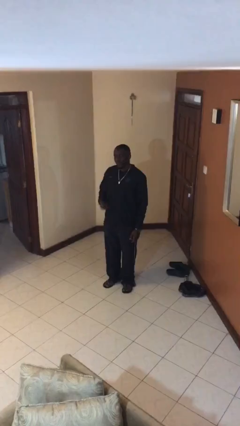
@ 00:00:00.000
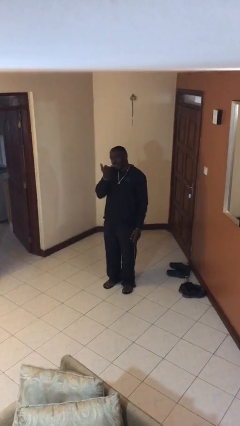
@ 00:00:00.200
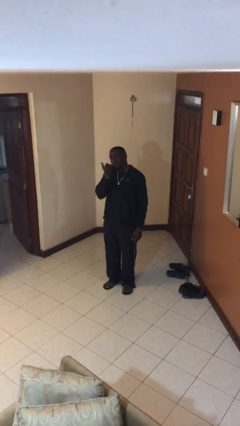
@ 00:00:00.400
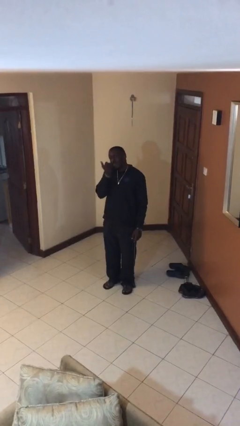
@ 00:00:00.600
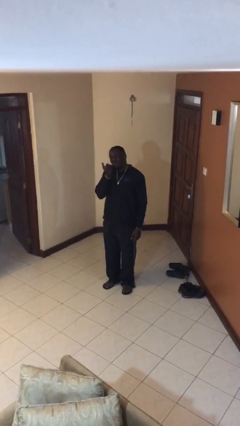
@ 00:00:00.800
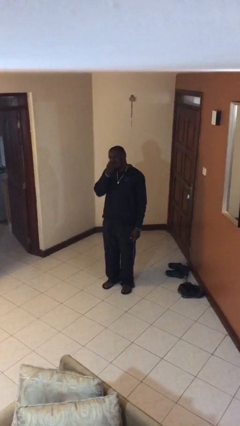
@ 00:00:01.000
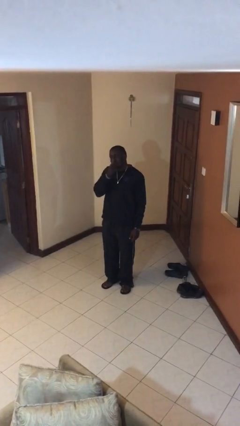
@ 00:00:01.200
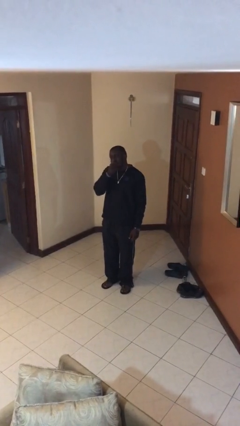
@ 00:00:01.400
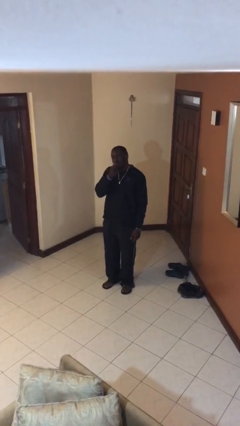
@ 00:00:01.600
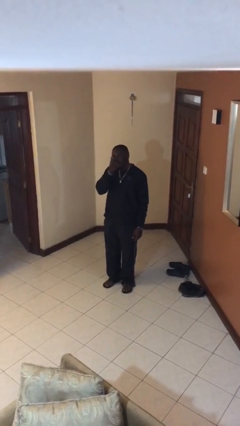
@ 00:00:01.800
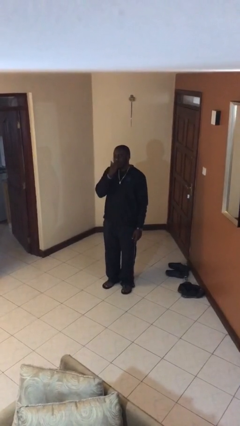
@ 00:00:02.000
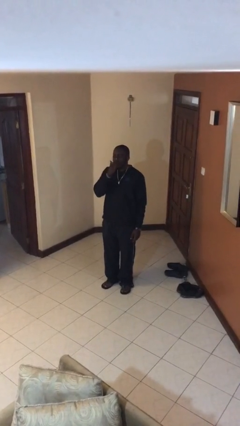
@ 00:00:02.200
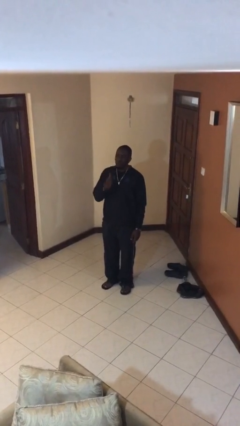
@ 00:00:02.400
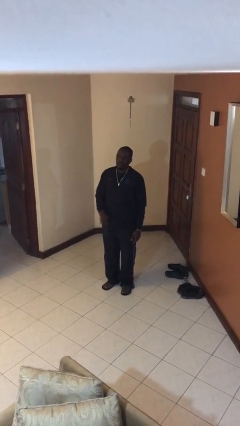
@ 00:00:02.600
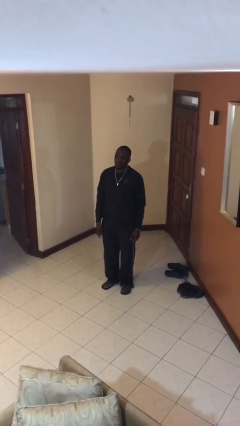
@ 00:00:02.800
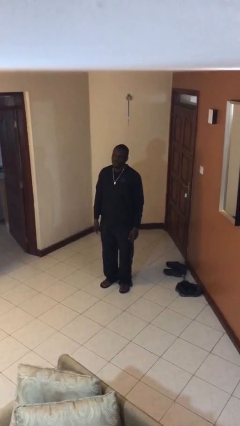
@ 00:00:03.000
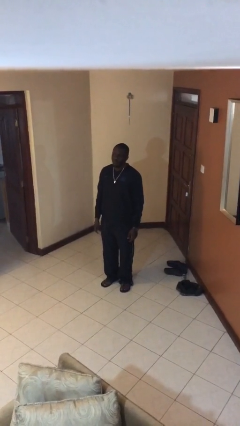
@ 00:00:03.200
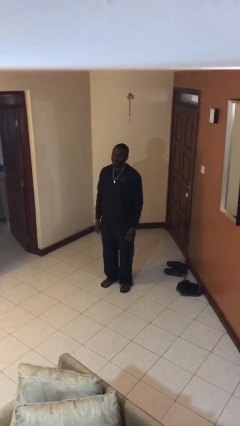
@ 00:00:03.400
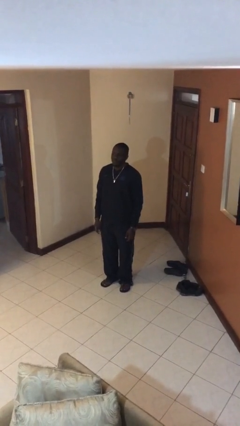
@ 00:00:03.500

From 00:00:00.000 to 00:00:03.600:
person licks fingers

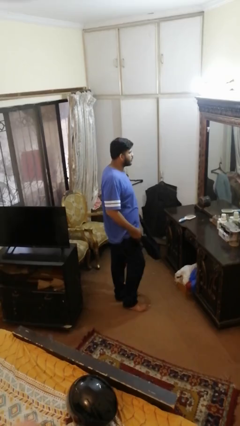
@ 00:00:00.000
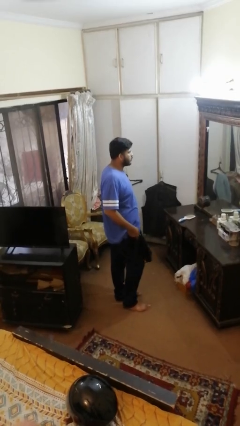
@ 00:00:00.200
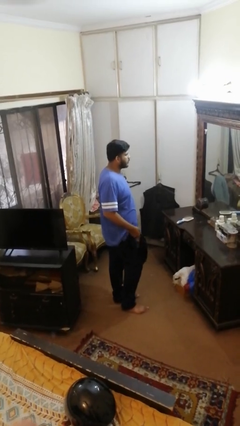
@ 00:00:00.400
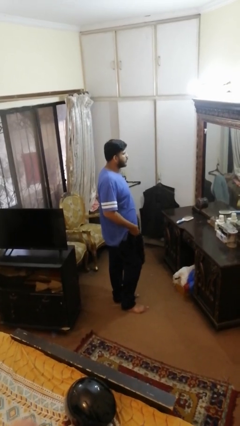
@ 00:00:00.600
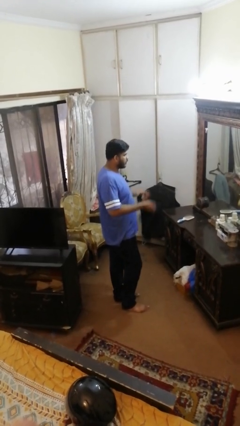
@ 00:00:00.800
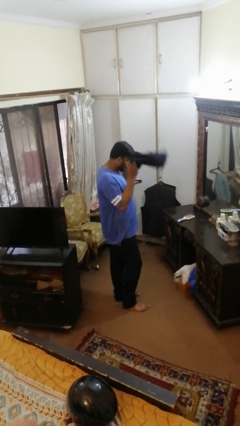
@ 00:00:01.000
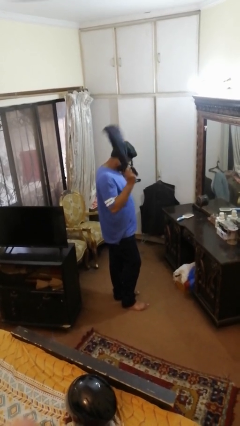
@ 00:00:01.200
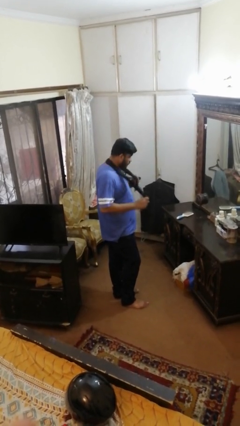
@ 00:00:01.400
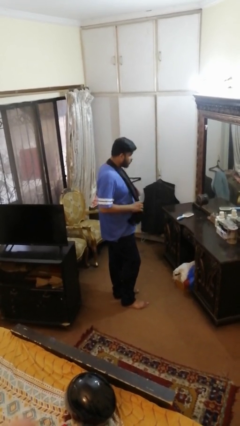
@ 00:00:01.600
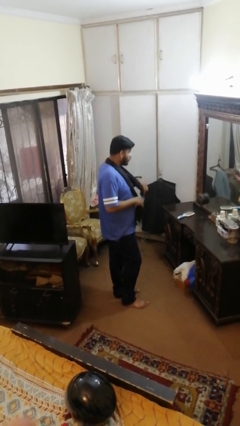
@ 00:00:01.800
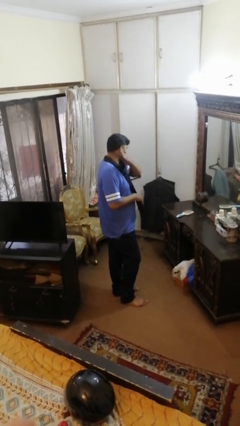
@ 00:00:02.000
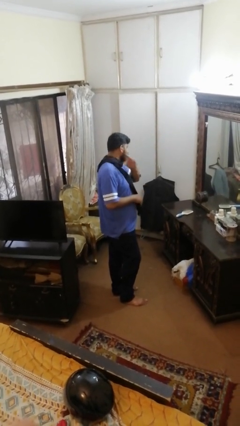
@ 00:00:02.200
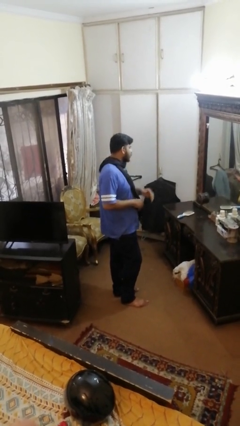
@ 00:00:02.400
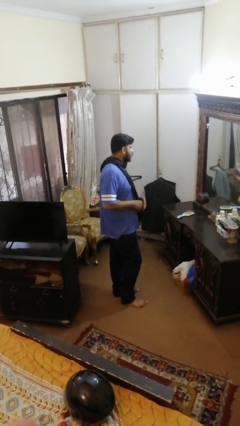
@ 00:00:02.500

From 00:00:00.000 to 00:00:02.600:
person puts on scarf

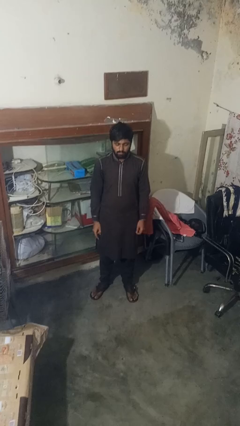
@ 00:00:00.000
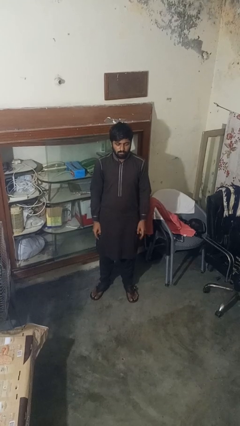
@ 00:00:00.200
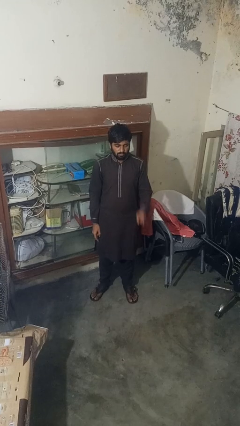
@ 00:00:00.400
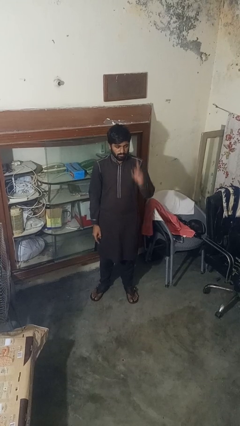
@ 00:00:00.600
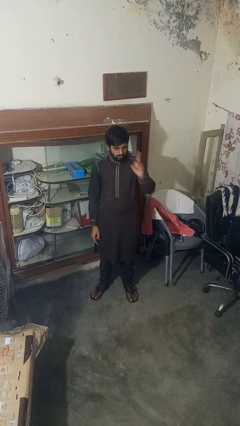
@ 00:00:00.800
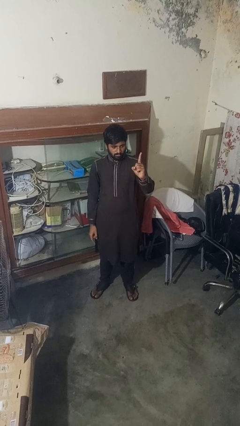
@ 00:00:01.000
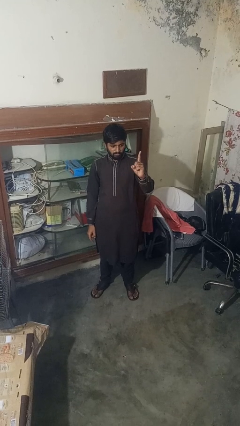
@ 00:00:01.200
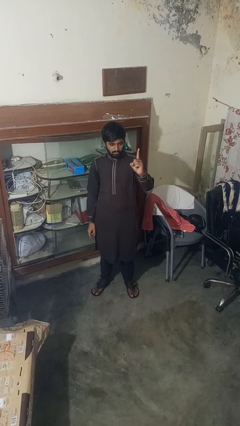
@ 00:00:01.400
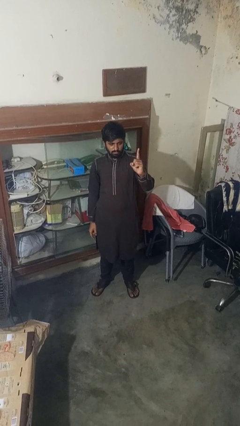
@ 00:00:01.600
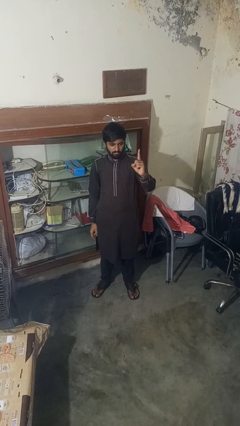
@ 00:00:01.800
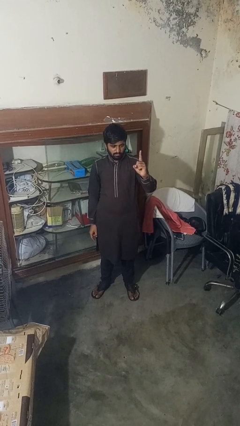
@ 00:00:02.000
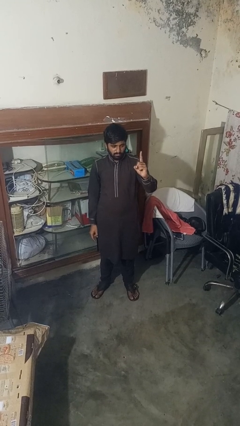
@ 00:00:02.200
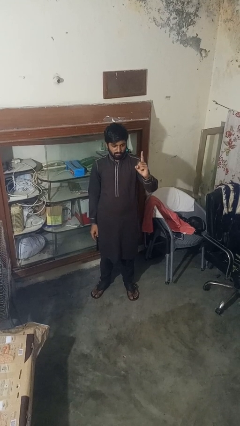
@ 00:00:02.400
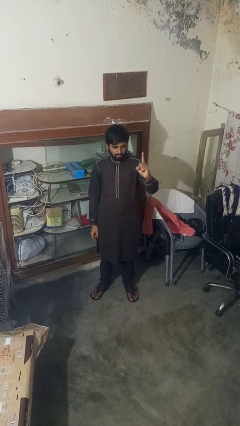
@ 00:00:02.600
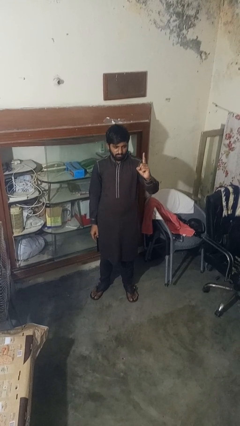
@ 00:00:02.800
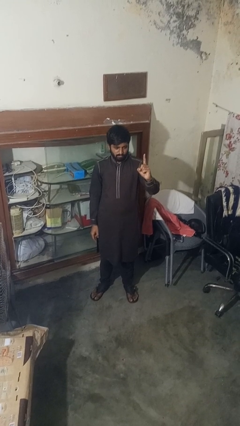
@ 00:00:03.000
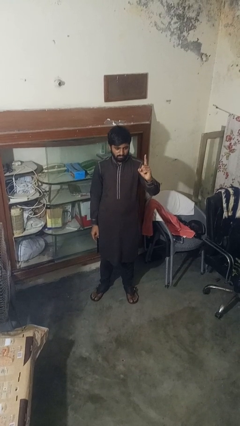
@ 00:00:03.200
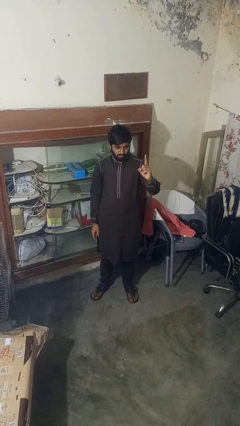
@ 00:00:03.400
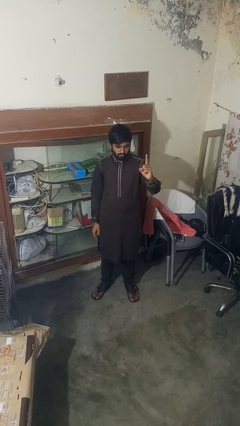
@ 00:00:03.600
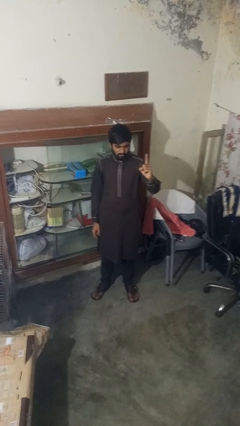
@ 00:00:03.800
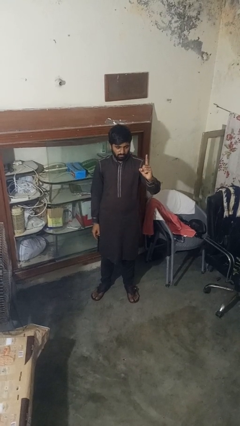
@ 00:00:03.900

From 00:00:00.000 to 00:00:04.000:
person gestures number one

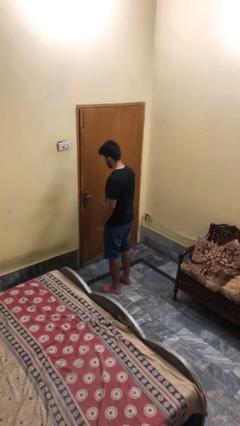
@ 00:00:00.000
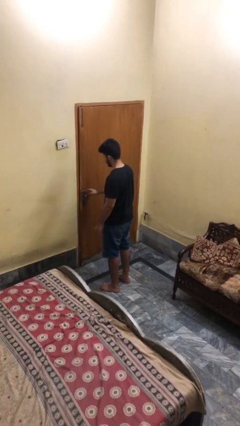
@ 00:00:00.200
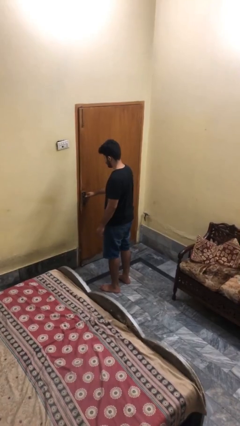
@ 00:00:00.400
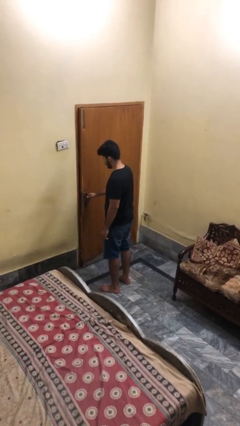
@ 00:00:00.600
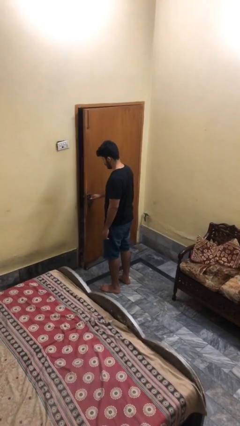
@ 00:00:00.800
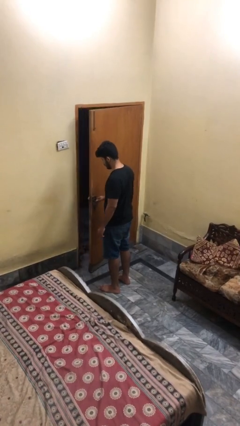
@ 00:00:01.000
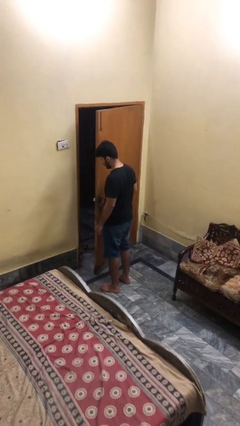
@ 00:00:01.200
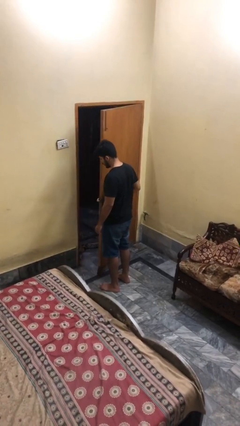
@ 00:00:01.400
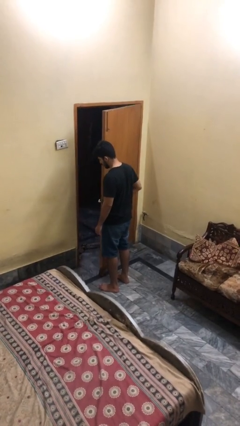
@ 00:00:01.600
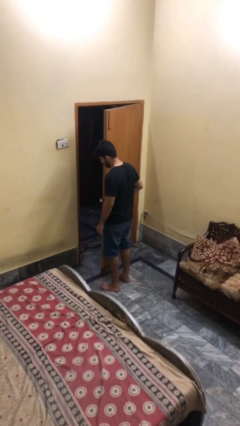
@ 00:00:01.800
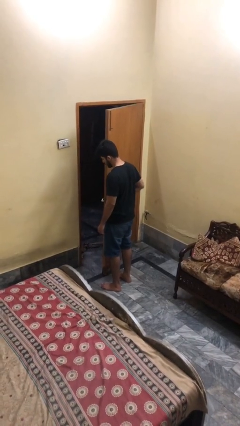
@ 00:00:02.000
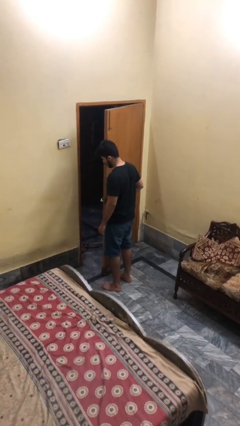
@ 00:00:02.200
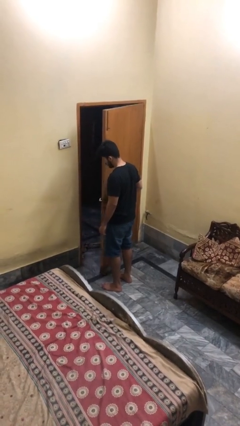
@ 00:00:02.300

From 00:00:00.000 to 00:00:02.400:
person opens facility door

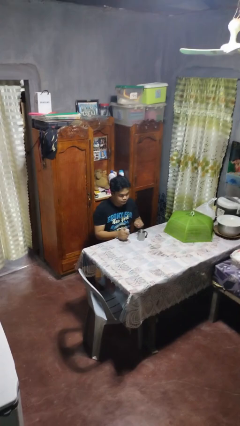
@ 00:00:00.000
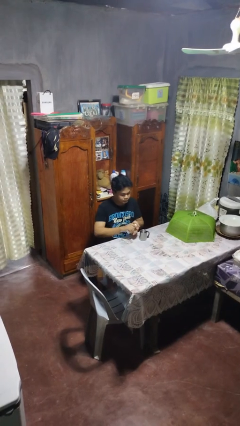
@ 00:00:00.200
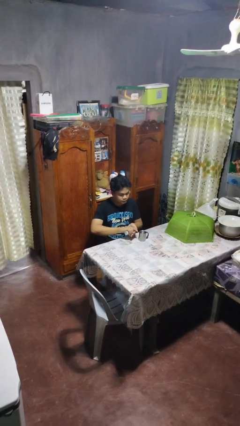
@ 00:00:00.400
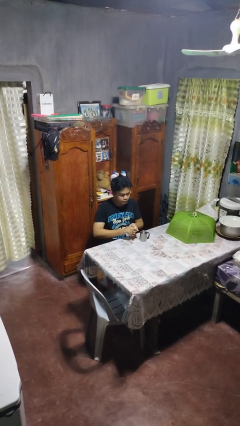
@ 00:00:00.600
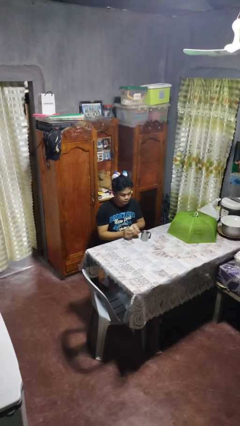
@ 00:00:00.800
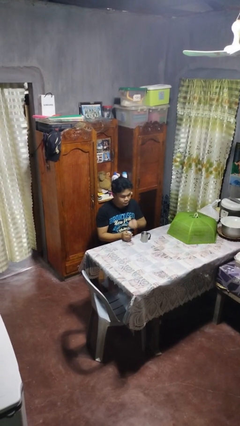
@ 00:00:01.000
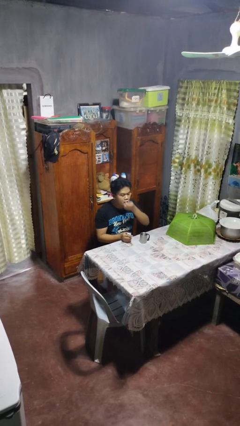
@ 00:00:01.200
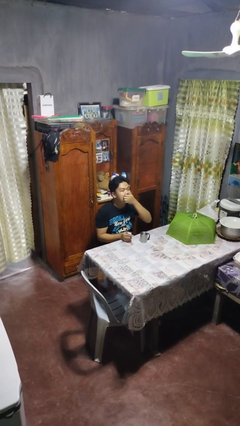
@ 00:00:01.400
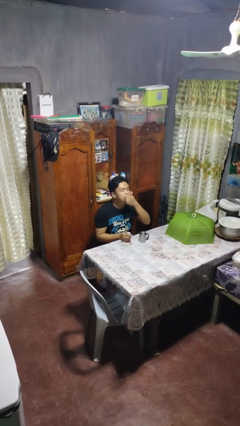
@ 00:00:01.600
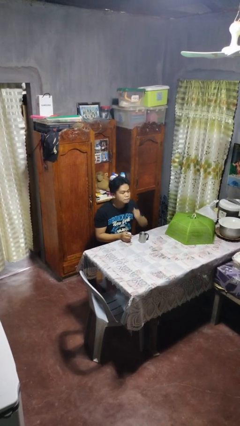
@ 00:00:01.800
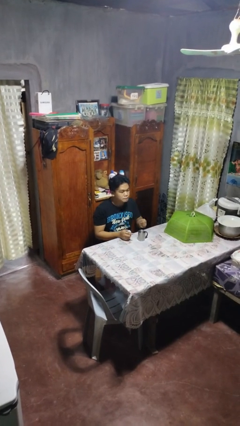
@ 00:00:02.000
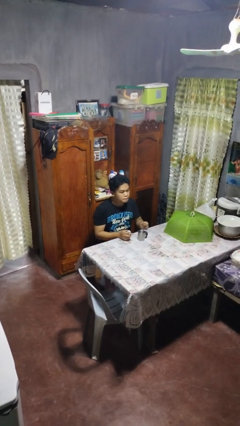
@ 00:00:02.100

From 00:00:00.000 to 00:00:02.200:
person takes medicine pills

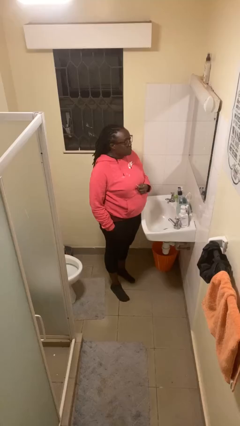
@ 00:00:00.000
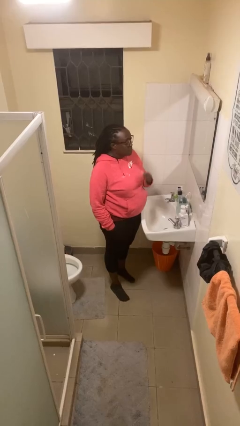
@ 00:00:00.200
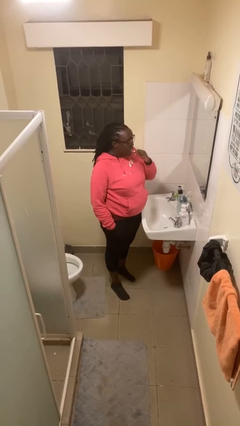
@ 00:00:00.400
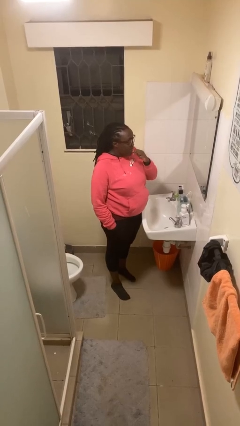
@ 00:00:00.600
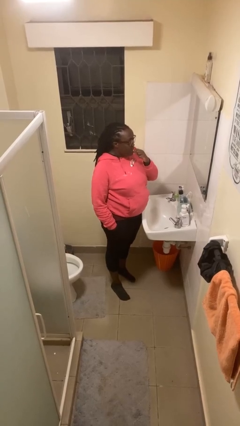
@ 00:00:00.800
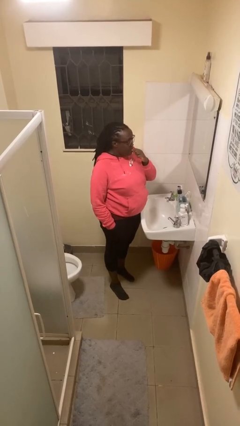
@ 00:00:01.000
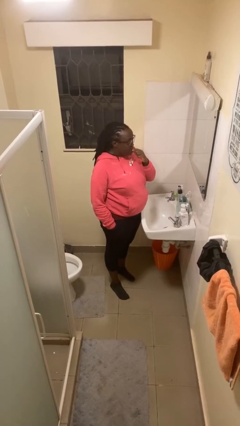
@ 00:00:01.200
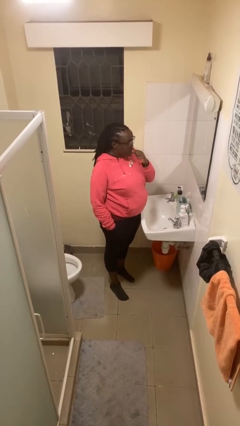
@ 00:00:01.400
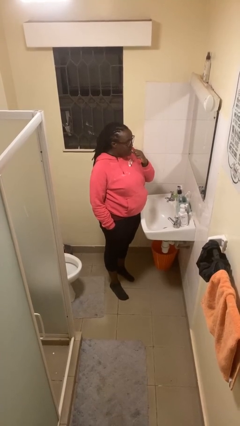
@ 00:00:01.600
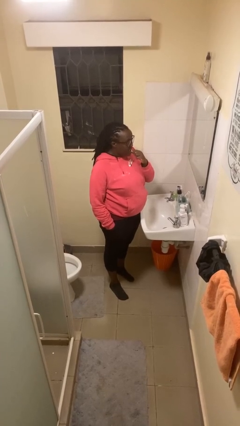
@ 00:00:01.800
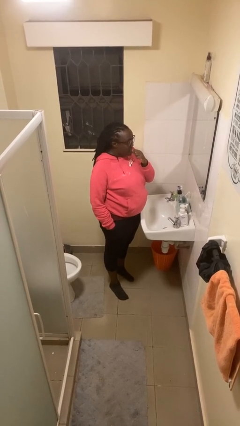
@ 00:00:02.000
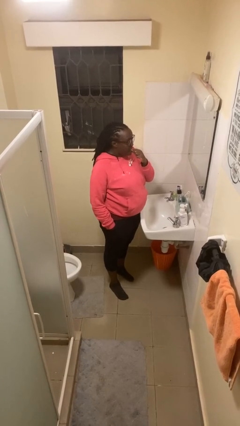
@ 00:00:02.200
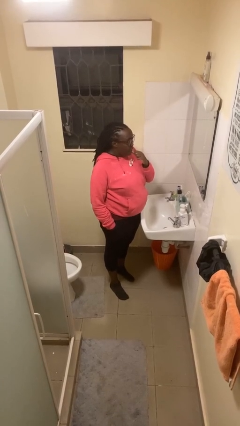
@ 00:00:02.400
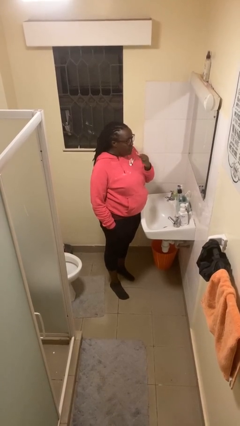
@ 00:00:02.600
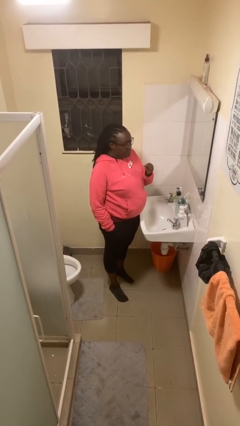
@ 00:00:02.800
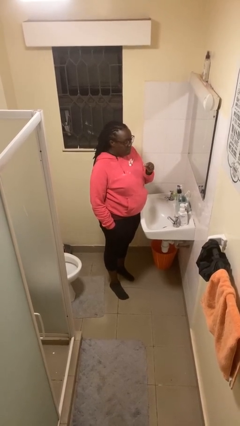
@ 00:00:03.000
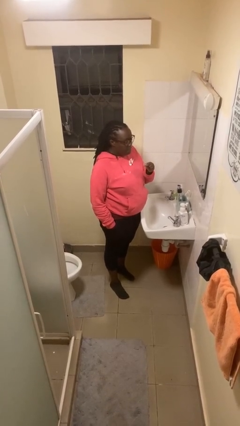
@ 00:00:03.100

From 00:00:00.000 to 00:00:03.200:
person flosses
